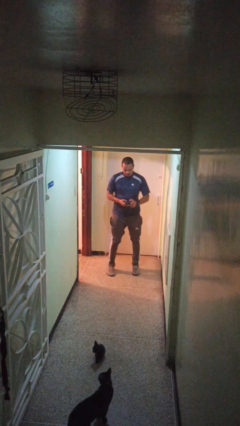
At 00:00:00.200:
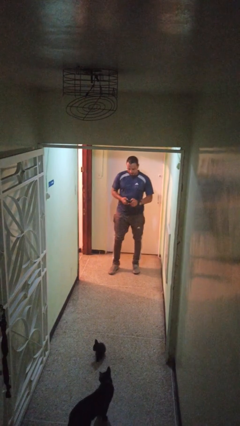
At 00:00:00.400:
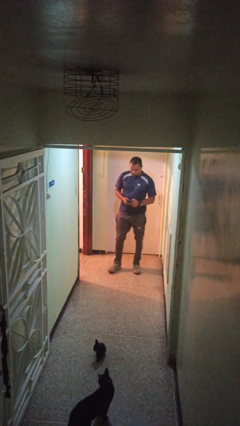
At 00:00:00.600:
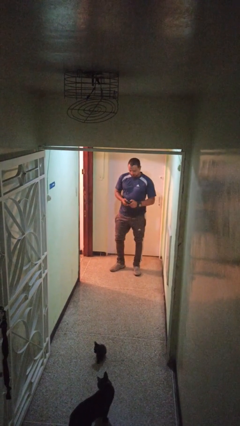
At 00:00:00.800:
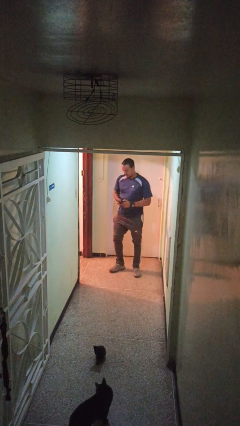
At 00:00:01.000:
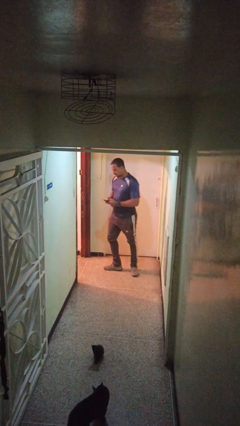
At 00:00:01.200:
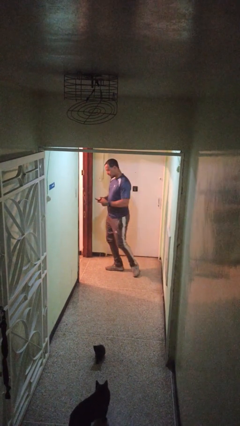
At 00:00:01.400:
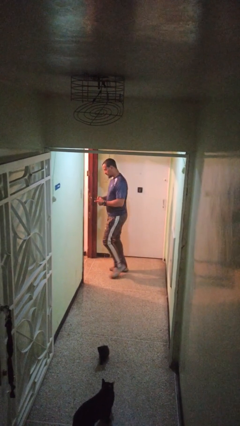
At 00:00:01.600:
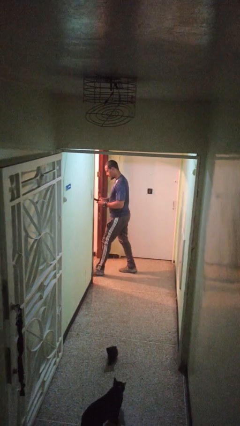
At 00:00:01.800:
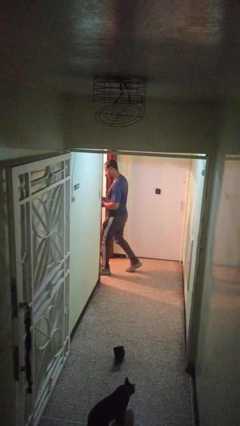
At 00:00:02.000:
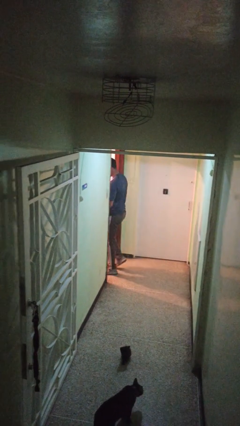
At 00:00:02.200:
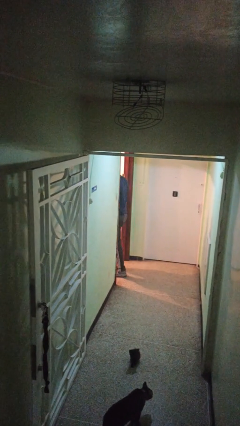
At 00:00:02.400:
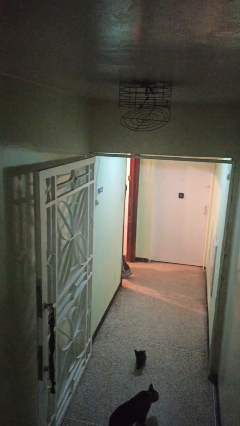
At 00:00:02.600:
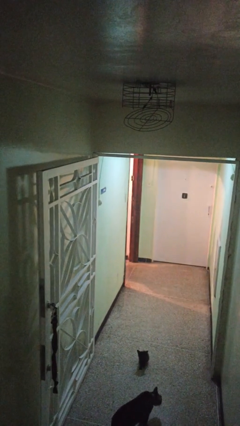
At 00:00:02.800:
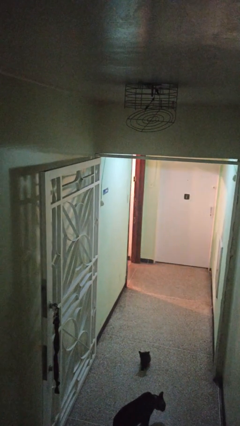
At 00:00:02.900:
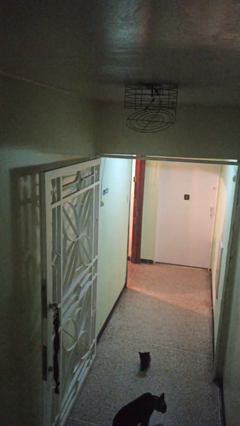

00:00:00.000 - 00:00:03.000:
person exits scene through structure

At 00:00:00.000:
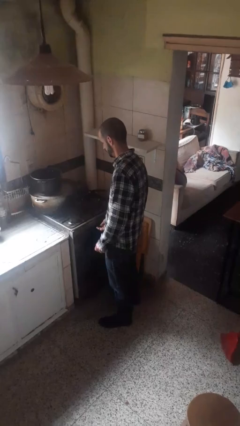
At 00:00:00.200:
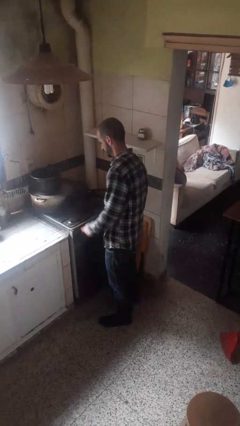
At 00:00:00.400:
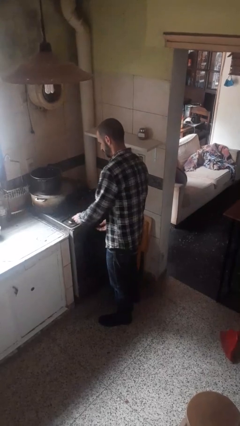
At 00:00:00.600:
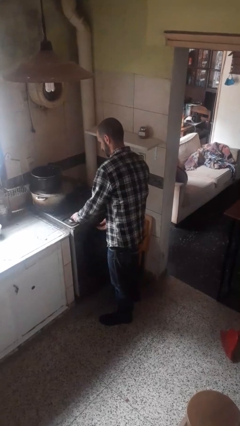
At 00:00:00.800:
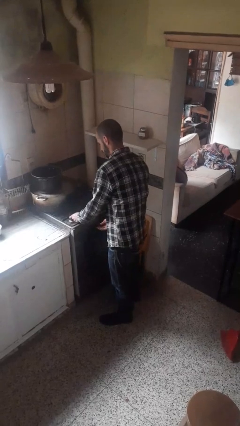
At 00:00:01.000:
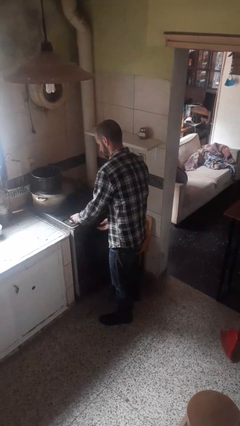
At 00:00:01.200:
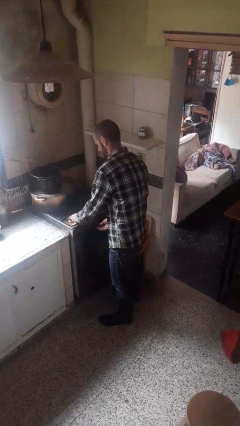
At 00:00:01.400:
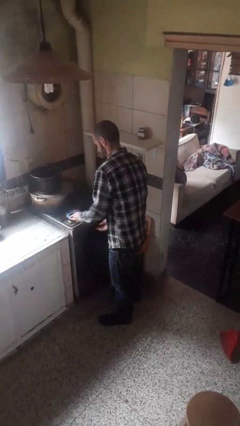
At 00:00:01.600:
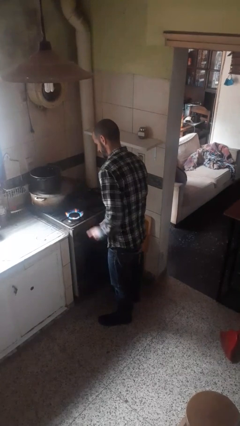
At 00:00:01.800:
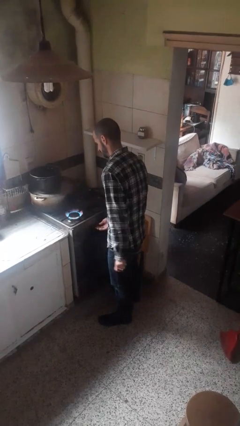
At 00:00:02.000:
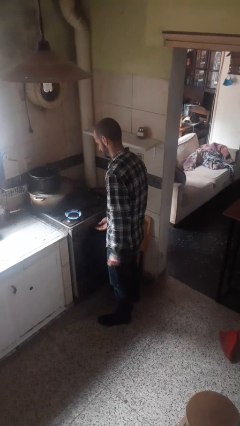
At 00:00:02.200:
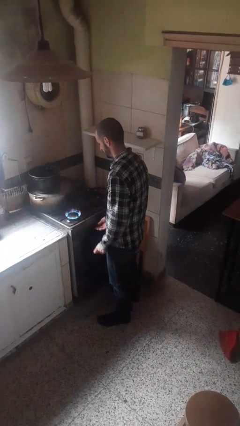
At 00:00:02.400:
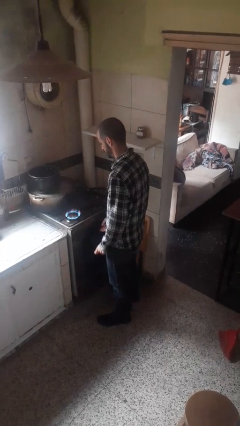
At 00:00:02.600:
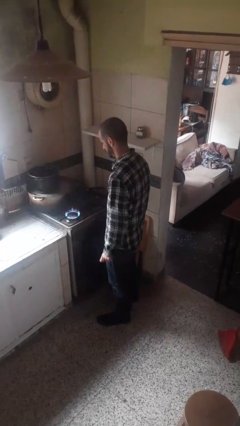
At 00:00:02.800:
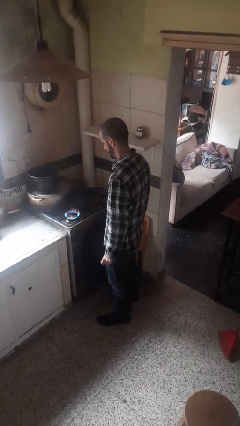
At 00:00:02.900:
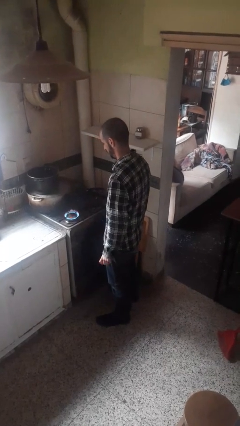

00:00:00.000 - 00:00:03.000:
person turns on stovetop

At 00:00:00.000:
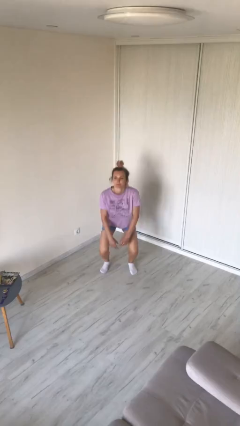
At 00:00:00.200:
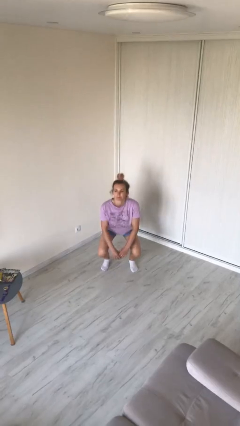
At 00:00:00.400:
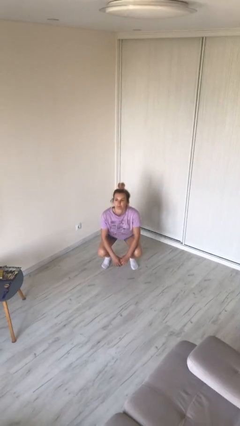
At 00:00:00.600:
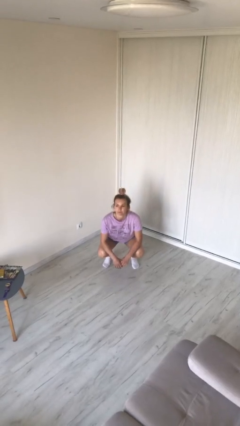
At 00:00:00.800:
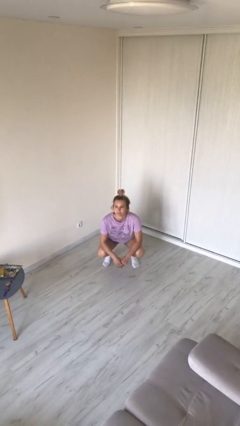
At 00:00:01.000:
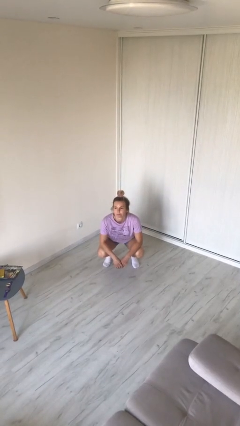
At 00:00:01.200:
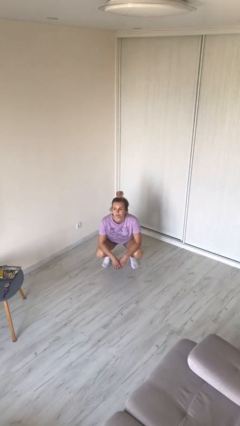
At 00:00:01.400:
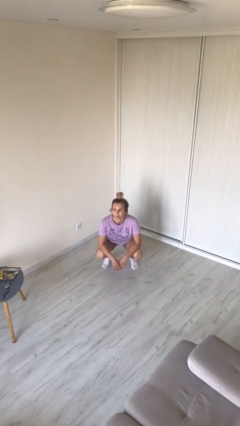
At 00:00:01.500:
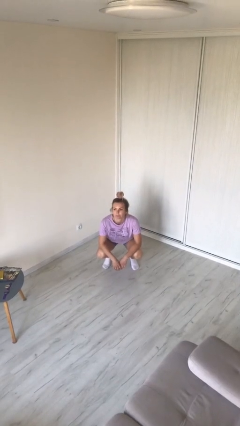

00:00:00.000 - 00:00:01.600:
person squats

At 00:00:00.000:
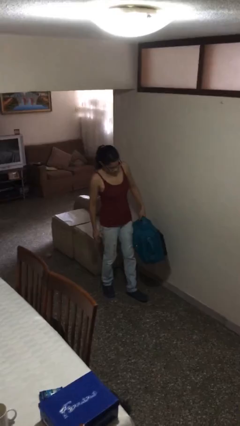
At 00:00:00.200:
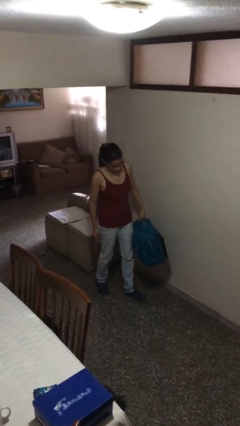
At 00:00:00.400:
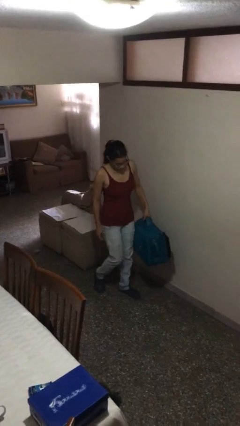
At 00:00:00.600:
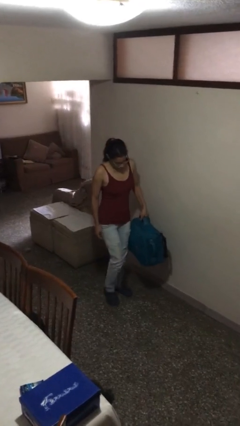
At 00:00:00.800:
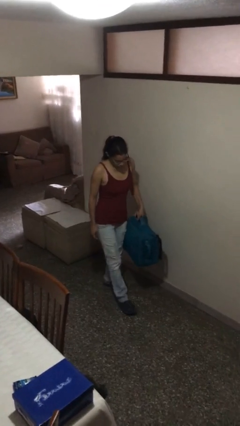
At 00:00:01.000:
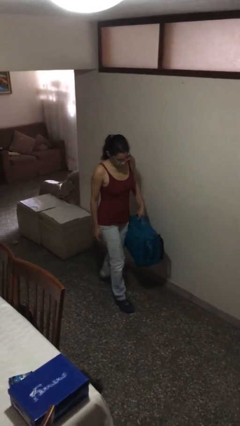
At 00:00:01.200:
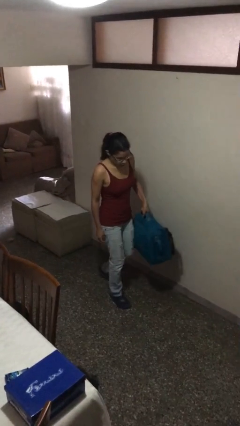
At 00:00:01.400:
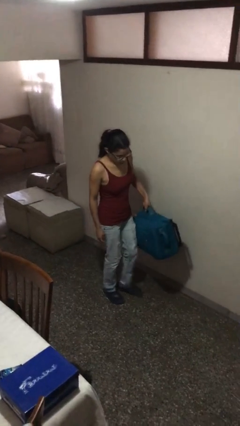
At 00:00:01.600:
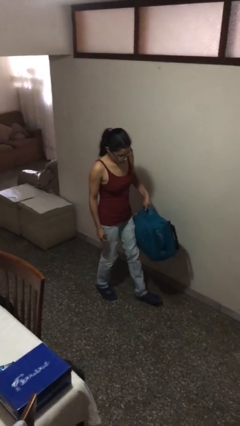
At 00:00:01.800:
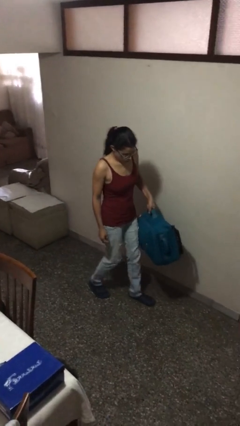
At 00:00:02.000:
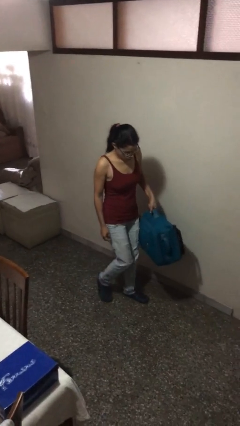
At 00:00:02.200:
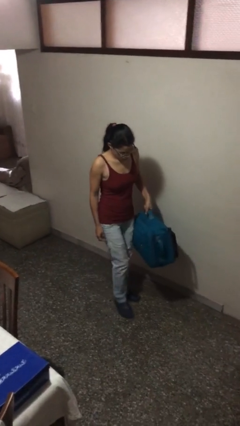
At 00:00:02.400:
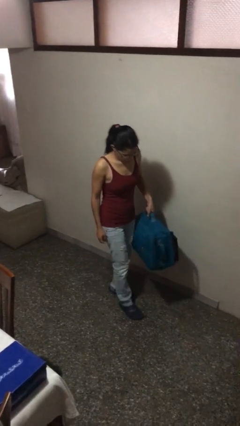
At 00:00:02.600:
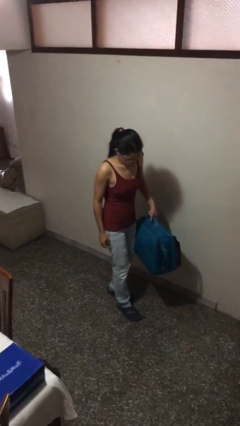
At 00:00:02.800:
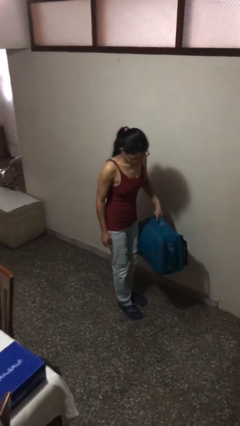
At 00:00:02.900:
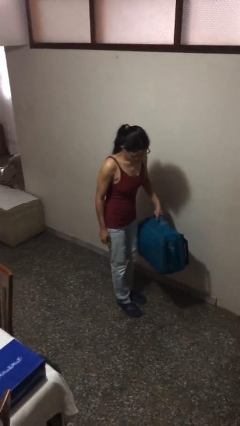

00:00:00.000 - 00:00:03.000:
person carries heavy object

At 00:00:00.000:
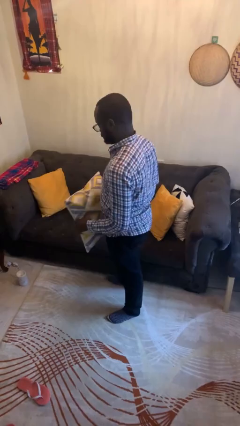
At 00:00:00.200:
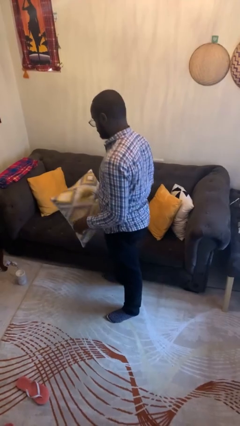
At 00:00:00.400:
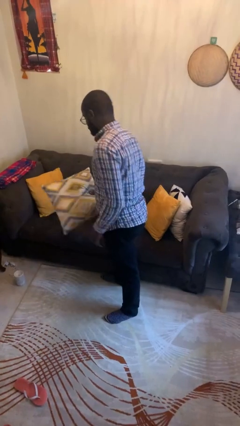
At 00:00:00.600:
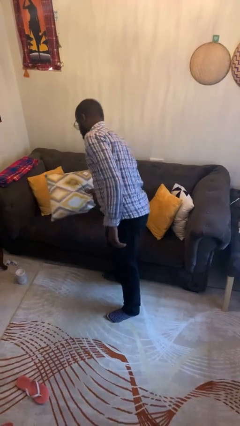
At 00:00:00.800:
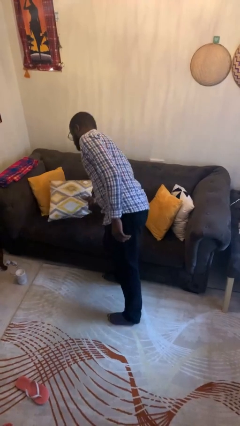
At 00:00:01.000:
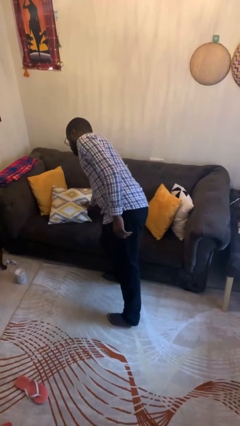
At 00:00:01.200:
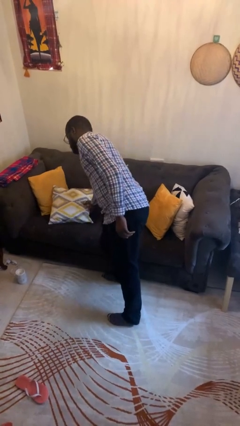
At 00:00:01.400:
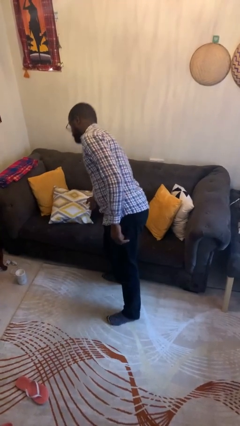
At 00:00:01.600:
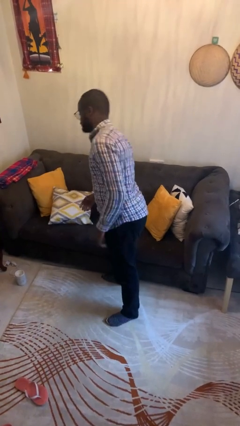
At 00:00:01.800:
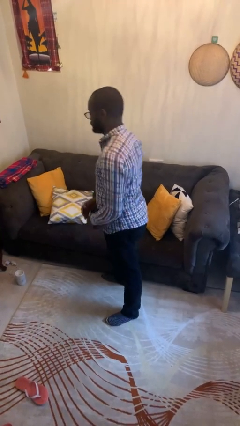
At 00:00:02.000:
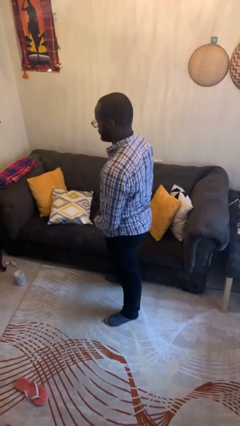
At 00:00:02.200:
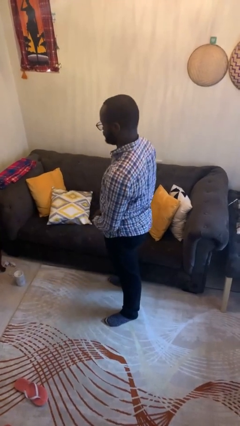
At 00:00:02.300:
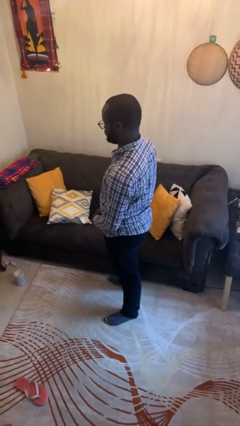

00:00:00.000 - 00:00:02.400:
person puts down object on couch

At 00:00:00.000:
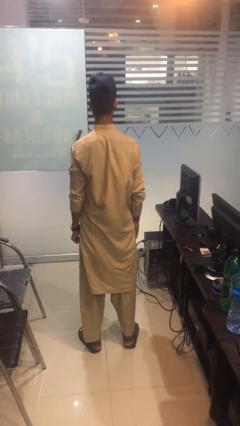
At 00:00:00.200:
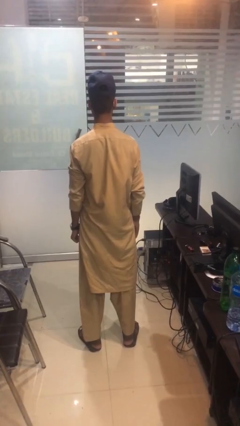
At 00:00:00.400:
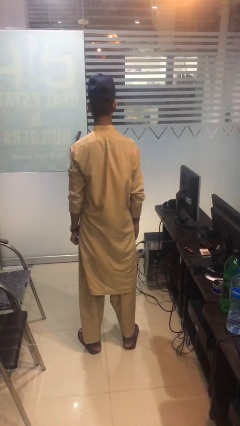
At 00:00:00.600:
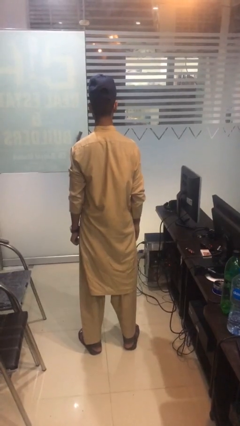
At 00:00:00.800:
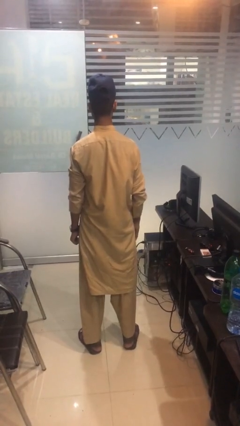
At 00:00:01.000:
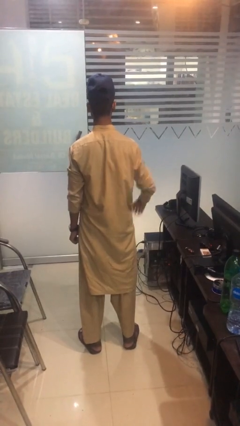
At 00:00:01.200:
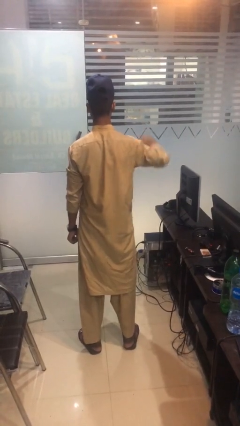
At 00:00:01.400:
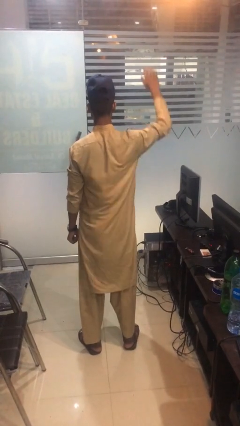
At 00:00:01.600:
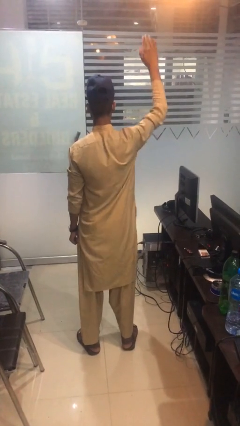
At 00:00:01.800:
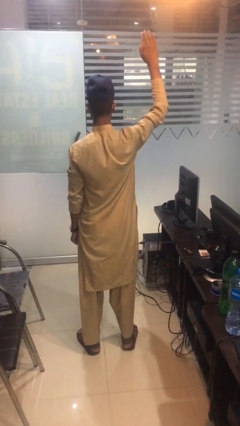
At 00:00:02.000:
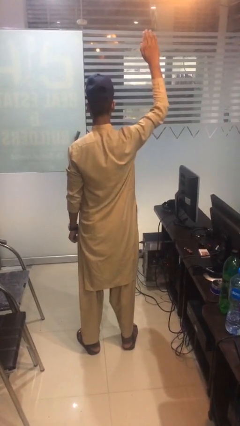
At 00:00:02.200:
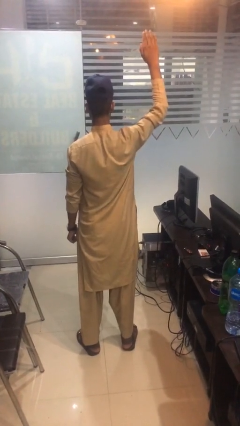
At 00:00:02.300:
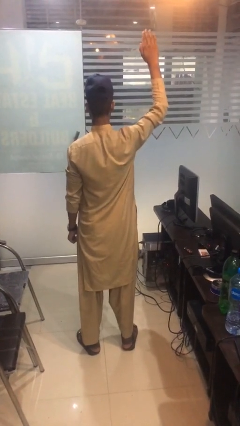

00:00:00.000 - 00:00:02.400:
person gestures raise hand

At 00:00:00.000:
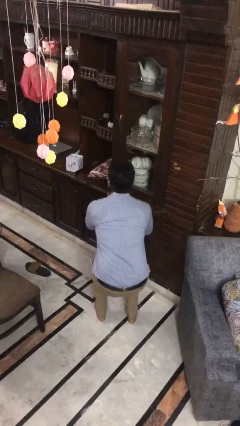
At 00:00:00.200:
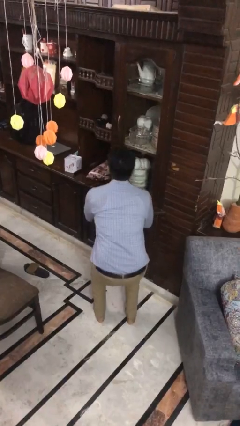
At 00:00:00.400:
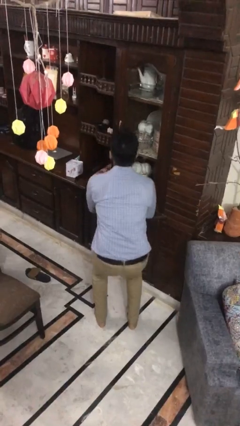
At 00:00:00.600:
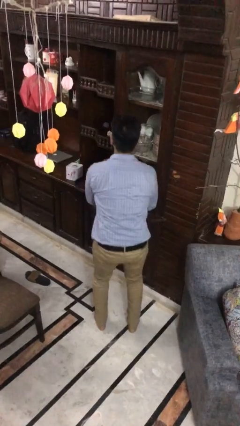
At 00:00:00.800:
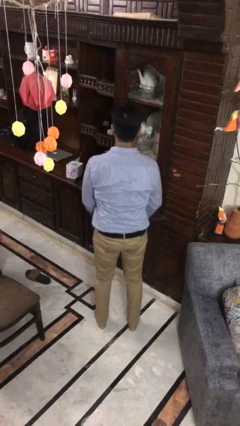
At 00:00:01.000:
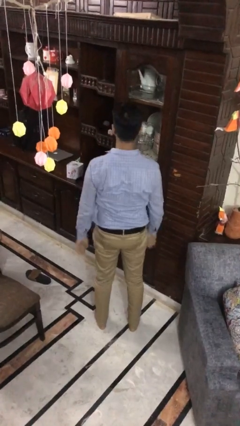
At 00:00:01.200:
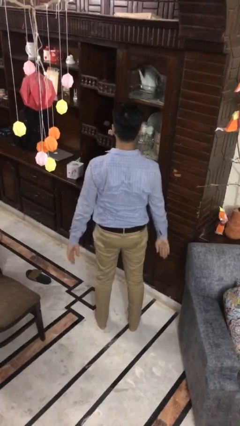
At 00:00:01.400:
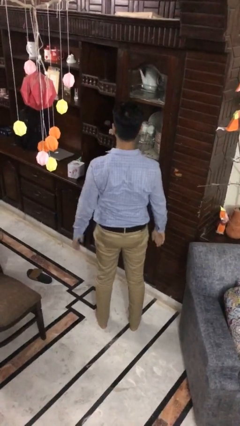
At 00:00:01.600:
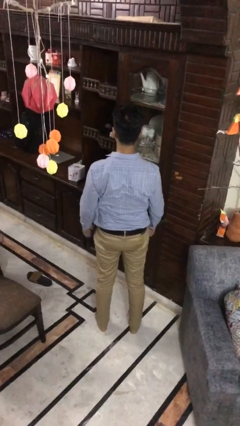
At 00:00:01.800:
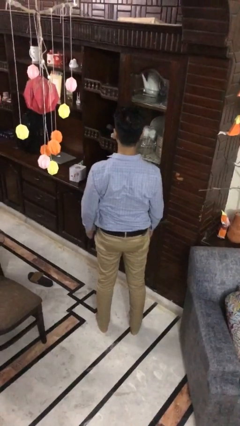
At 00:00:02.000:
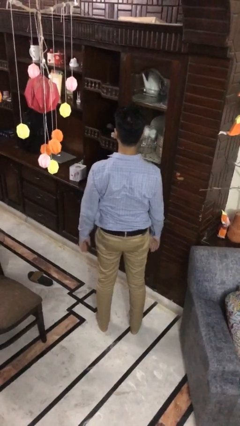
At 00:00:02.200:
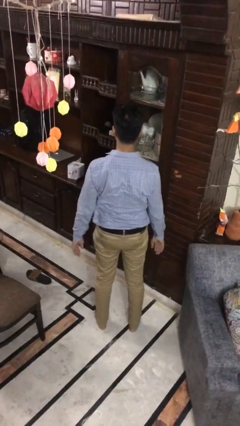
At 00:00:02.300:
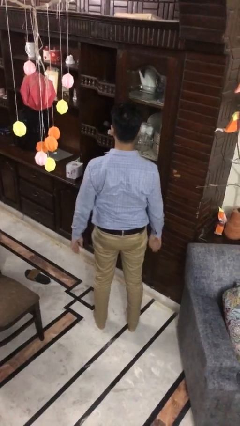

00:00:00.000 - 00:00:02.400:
person stands up
